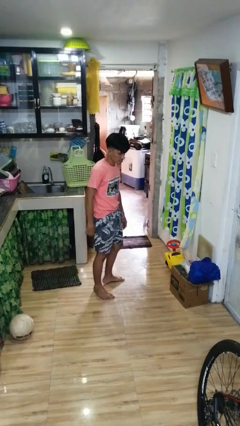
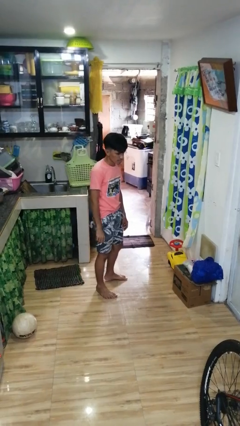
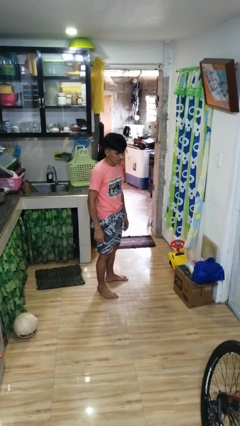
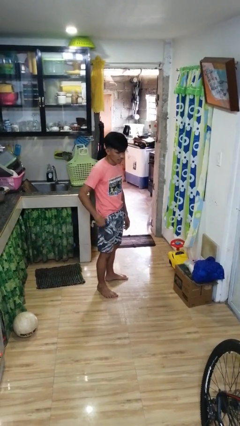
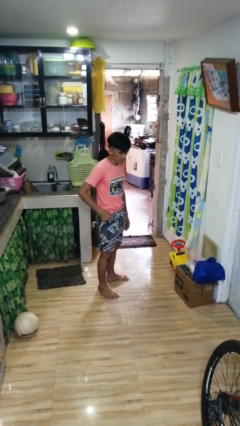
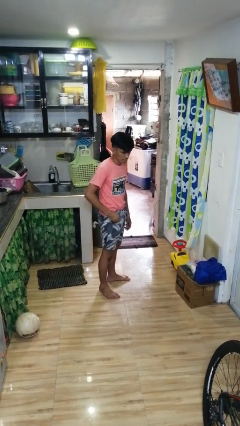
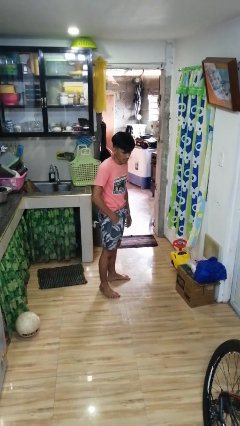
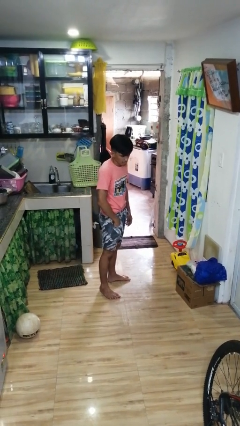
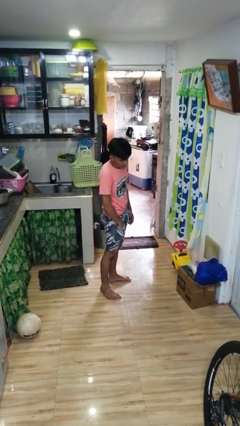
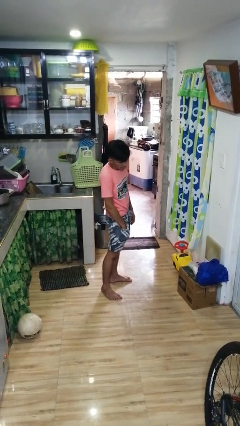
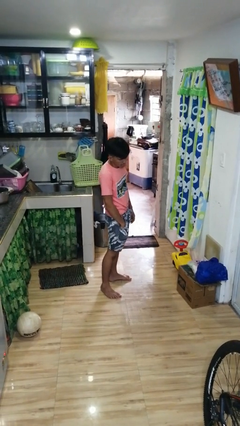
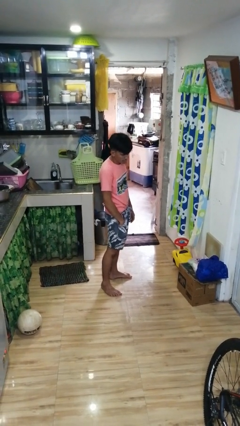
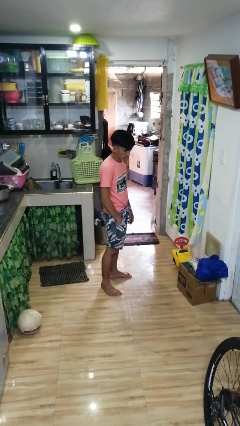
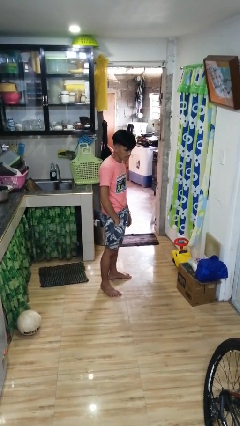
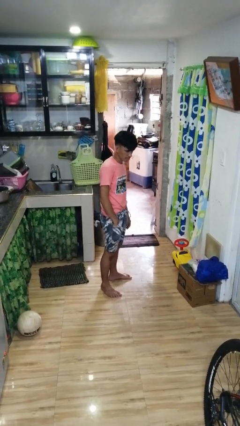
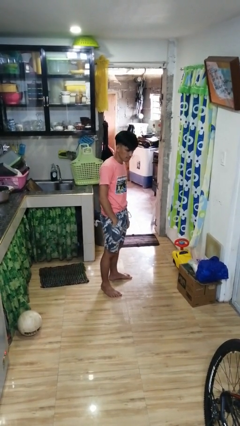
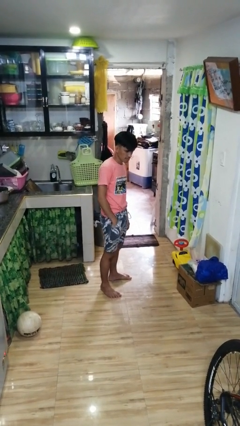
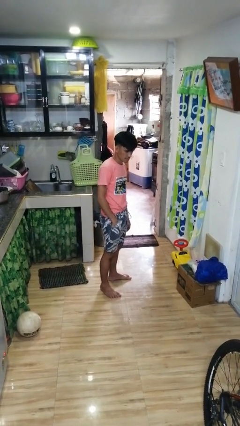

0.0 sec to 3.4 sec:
person puts hands in back pockets

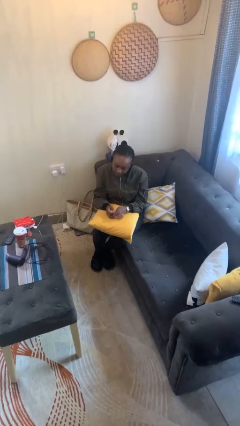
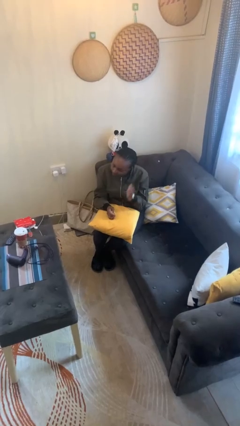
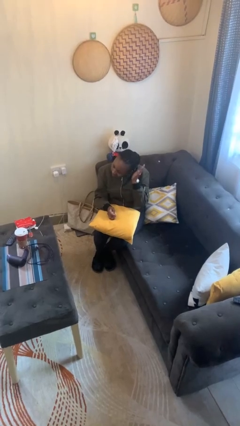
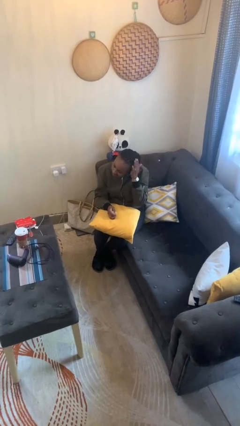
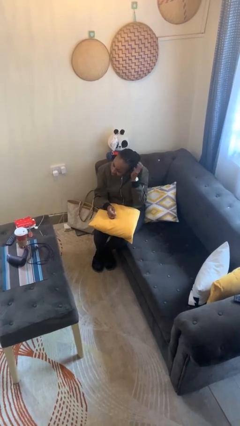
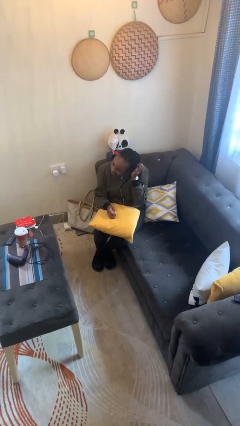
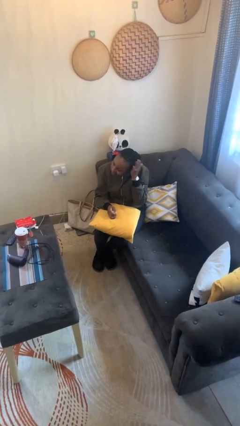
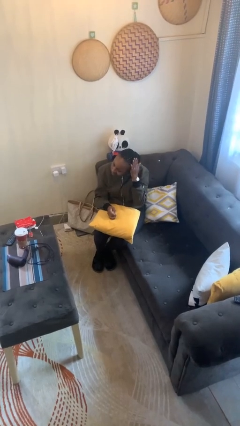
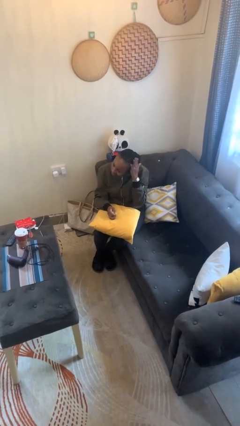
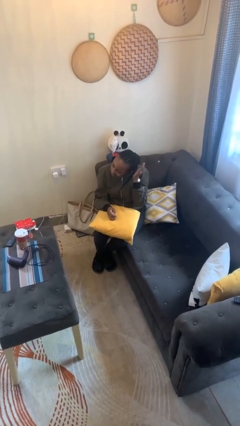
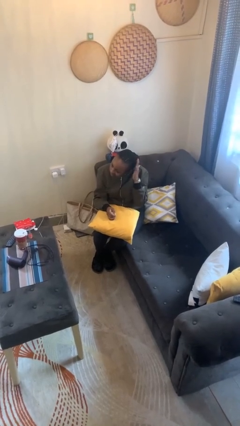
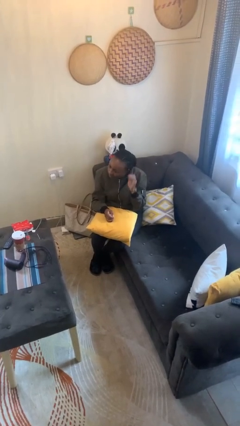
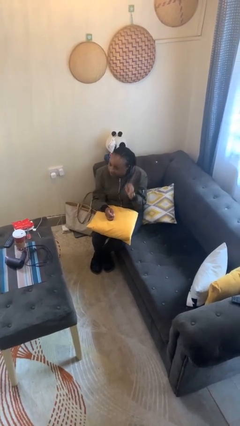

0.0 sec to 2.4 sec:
person pats head

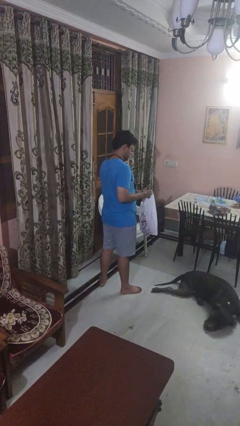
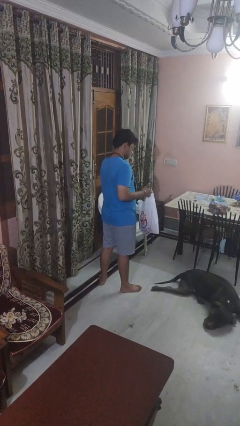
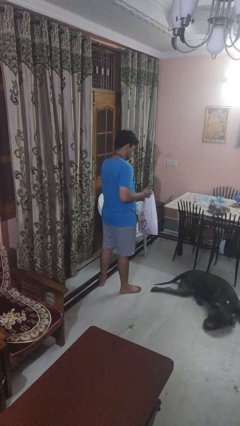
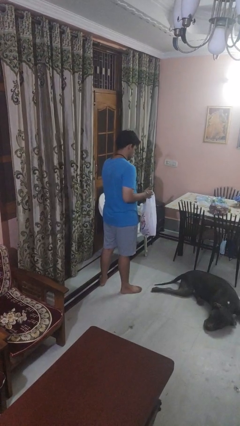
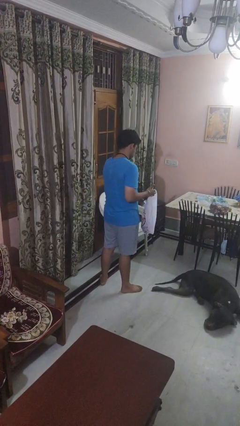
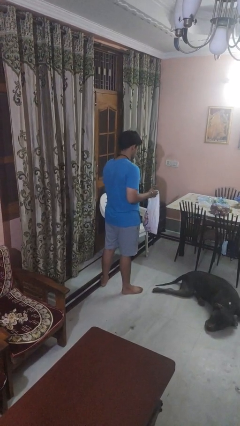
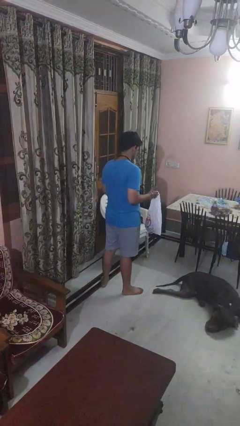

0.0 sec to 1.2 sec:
person puts object into bag

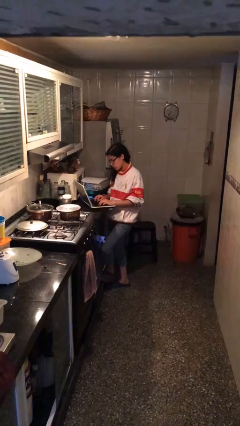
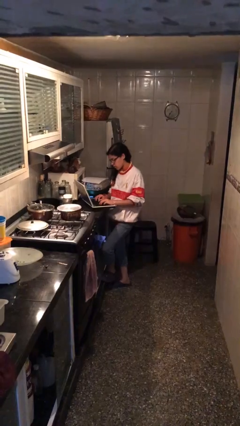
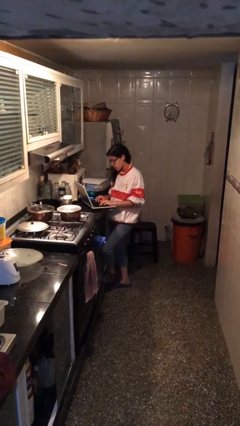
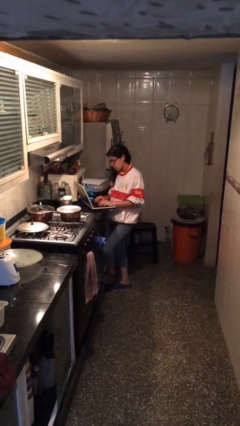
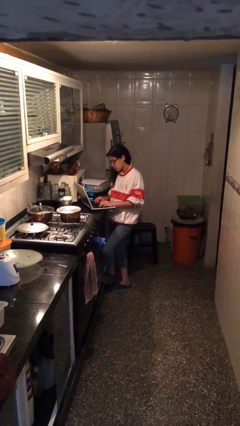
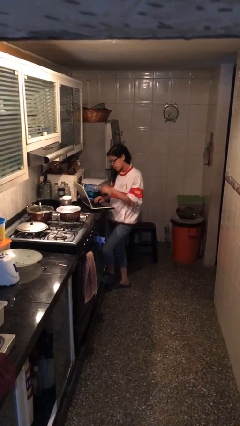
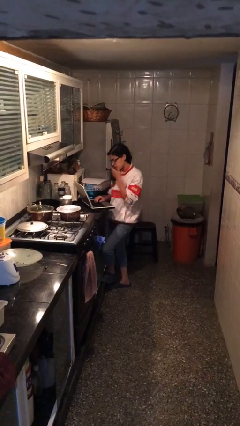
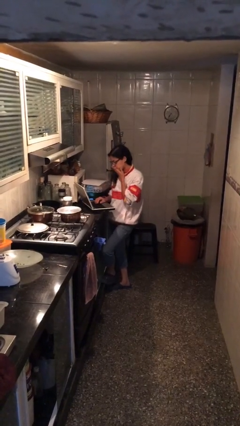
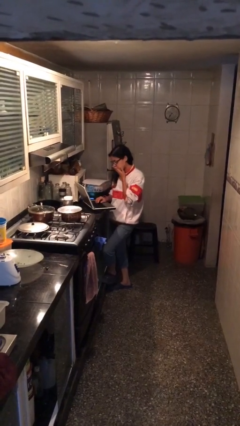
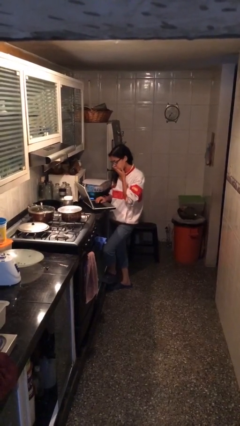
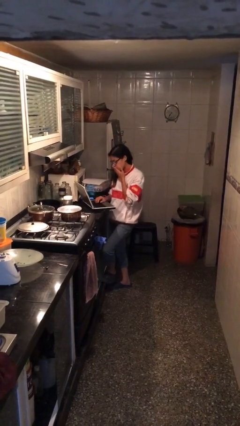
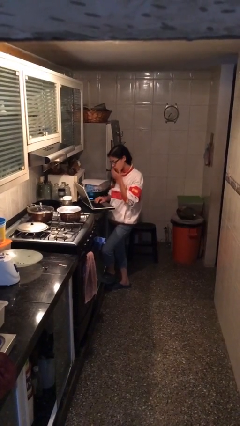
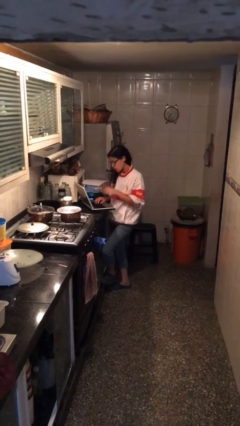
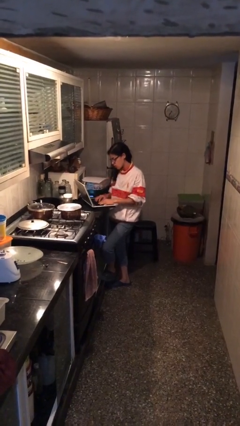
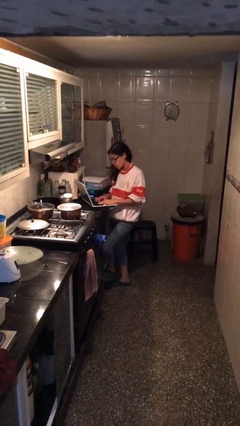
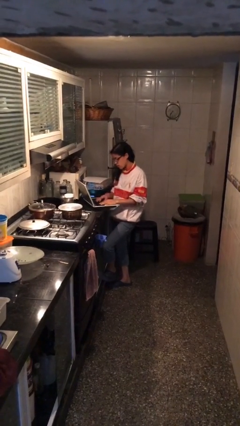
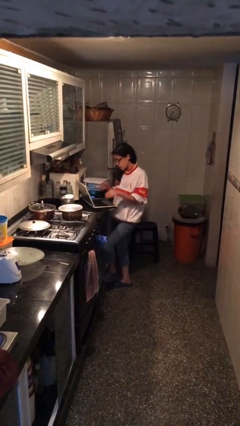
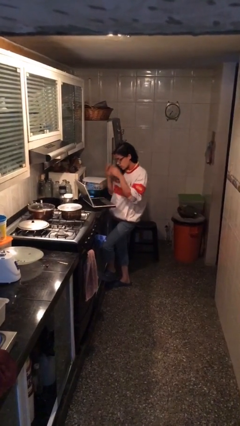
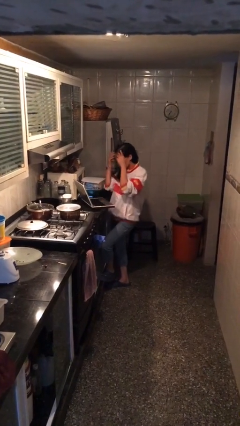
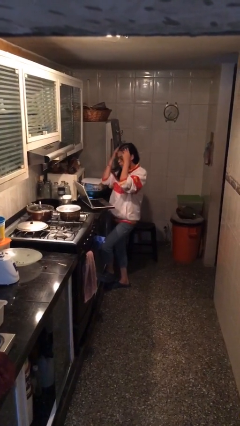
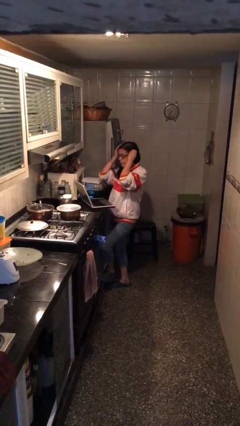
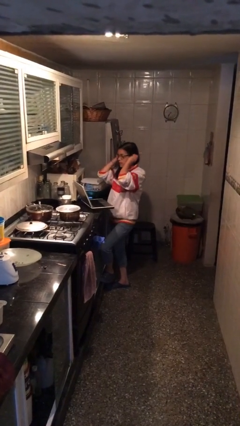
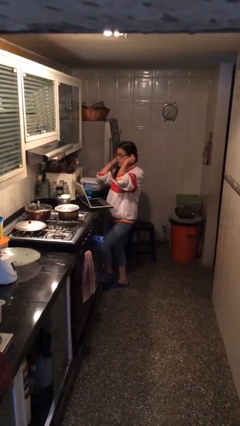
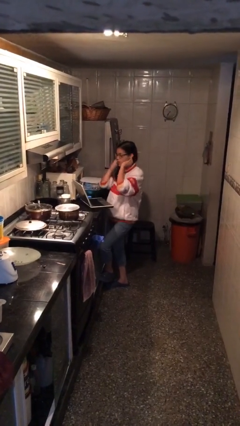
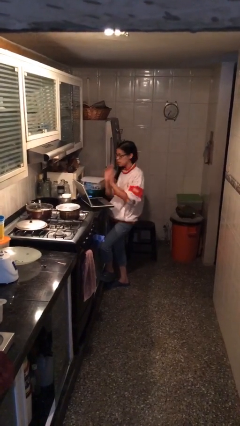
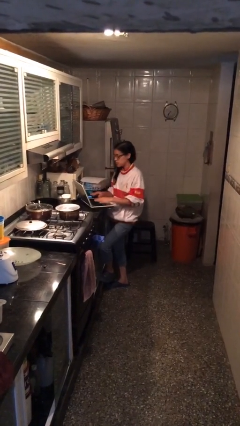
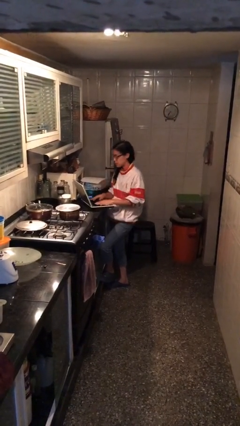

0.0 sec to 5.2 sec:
person interacts with laptop

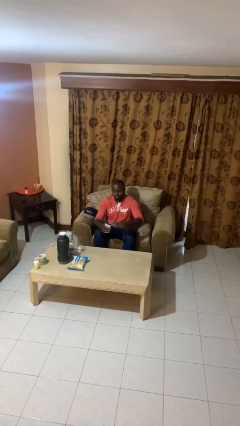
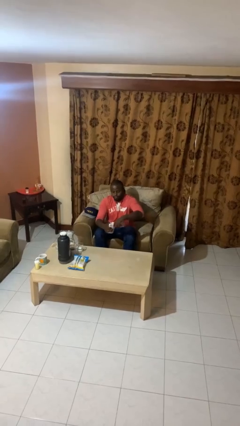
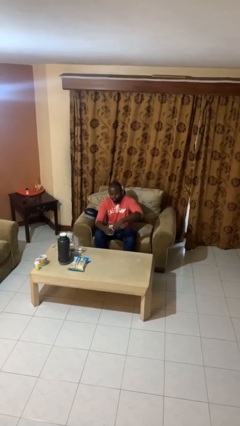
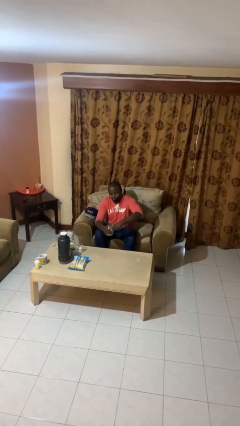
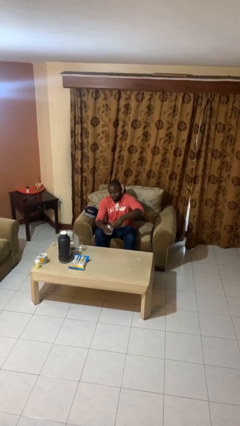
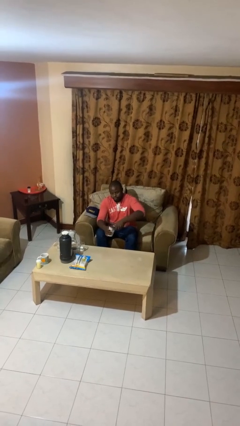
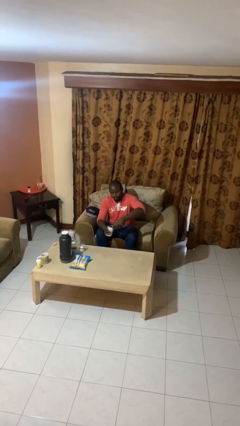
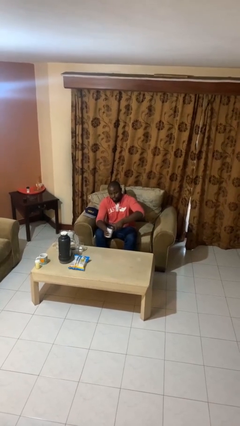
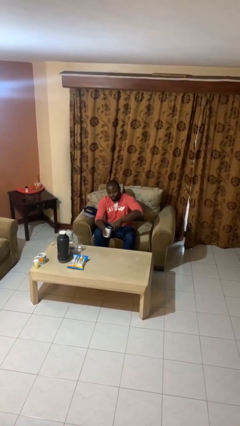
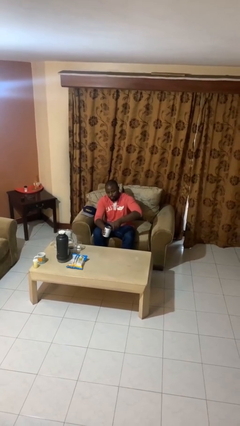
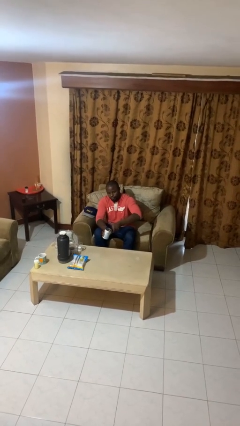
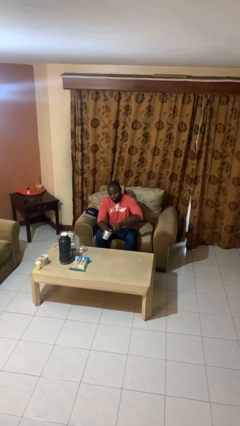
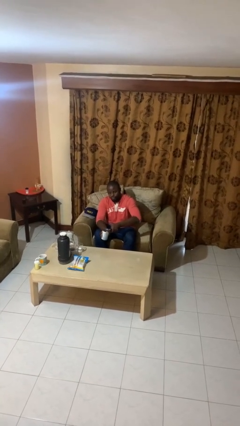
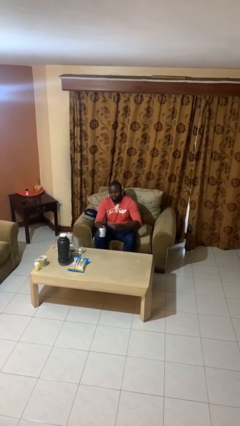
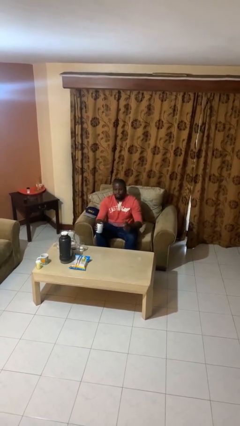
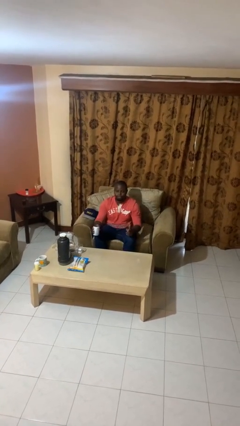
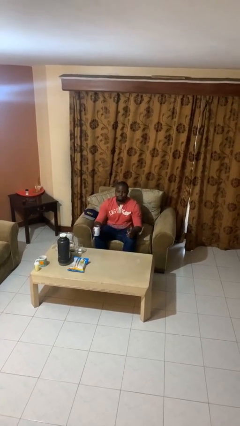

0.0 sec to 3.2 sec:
person opens can with can opener

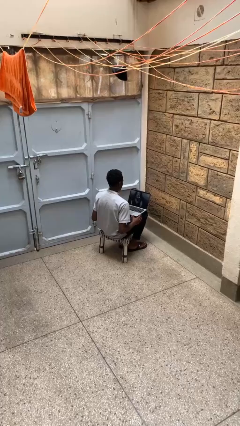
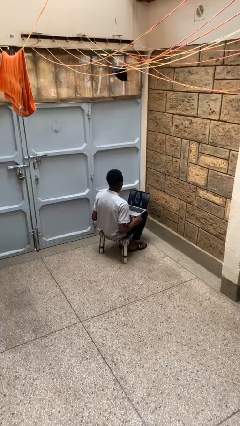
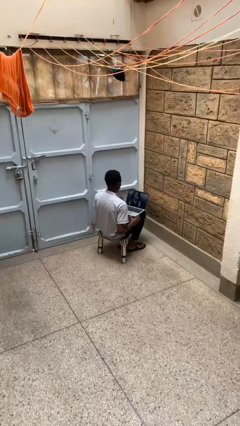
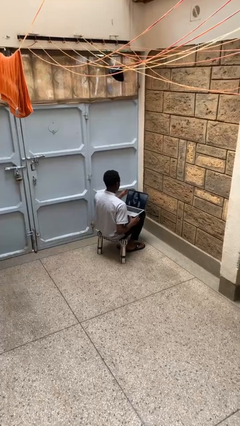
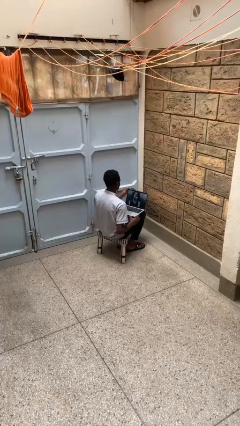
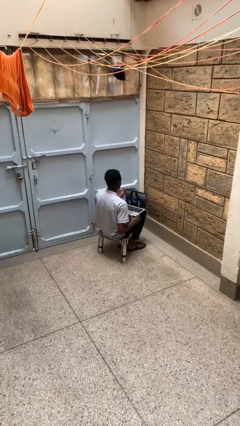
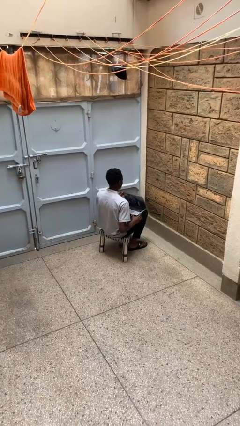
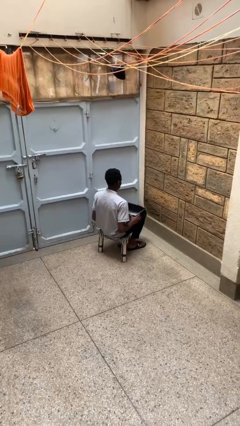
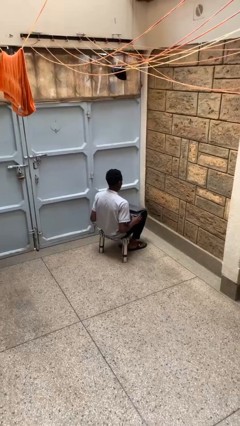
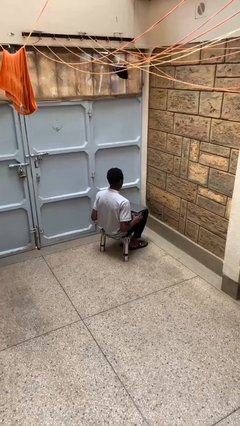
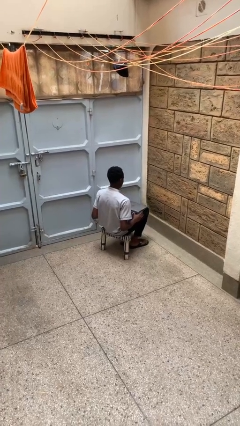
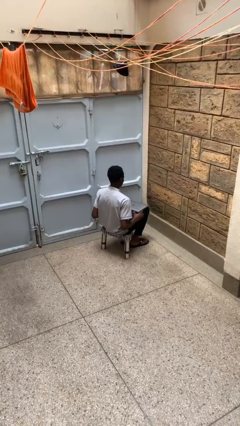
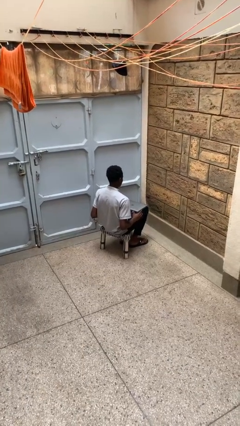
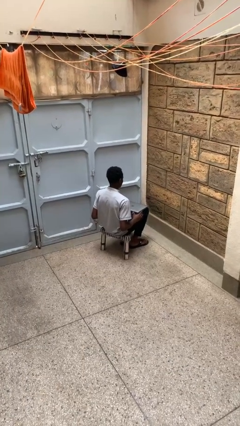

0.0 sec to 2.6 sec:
person closes laptop
